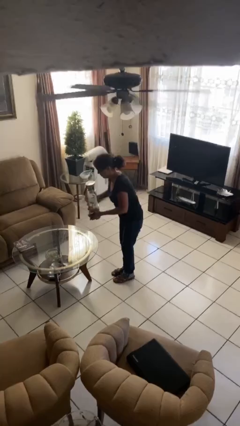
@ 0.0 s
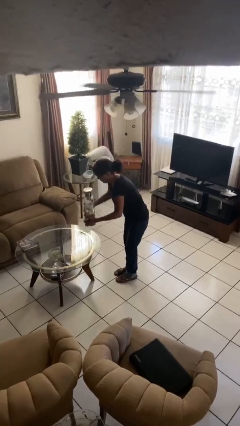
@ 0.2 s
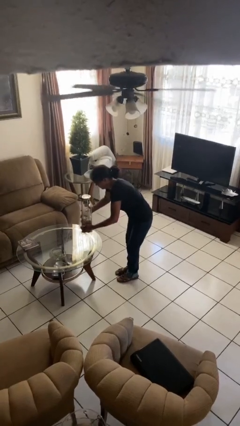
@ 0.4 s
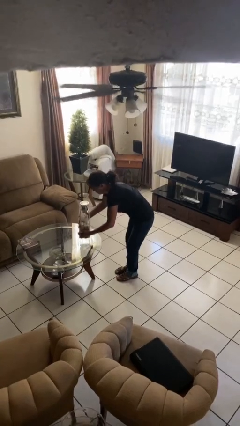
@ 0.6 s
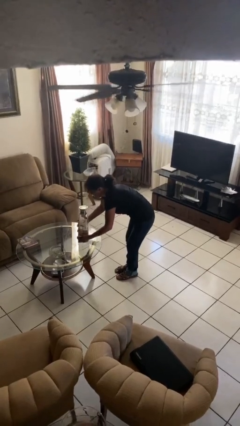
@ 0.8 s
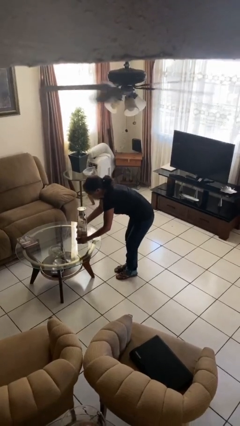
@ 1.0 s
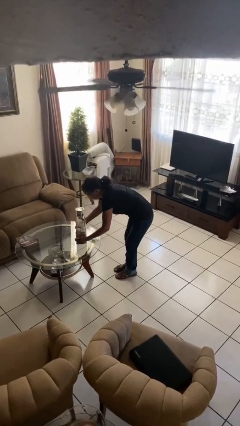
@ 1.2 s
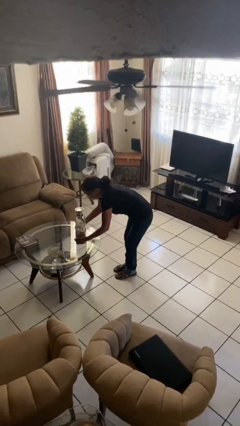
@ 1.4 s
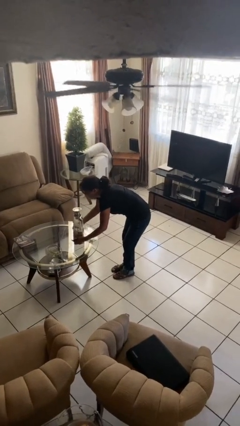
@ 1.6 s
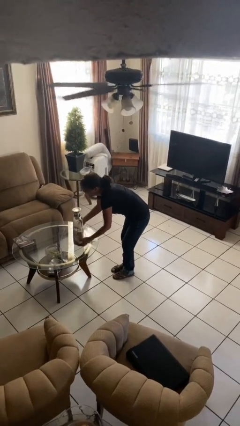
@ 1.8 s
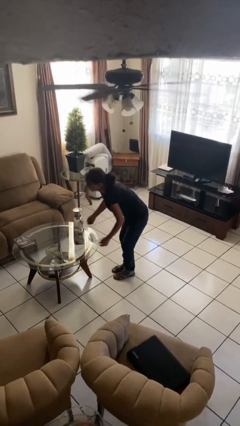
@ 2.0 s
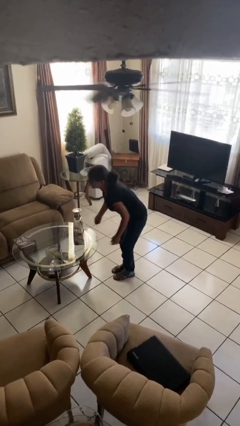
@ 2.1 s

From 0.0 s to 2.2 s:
person puts down object on table

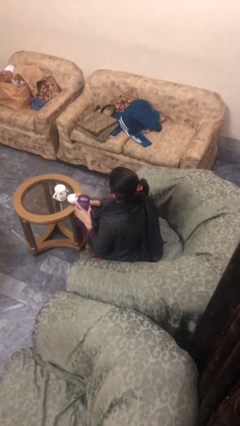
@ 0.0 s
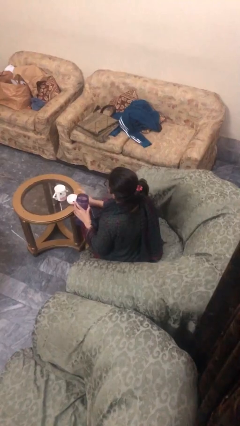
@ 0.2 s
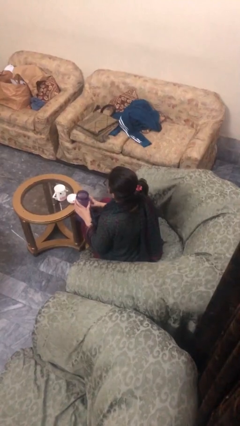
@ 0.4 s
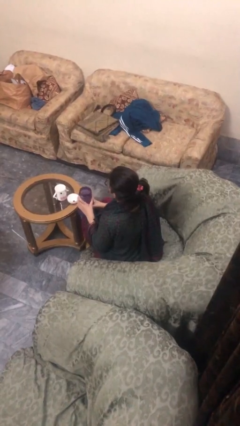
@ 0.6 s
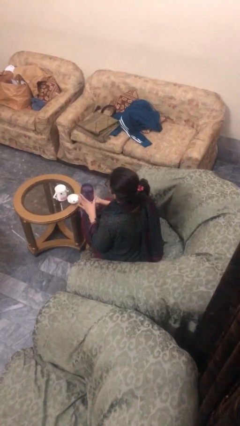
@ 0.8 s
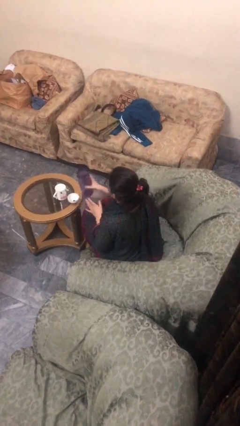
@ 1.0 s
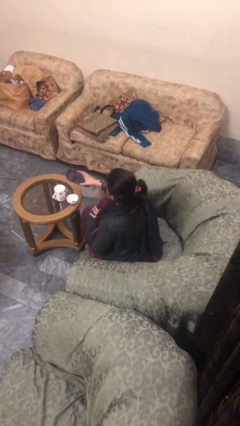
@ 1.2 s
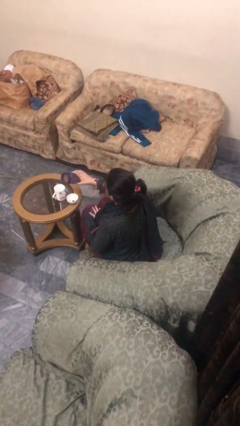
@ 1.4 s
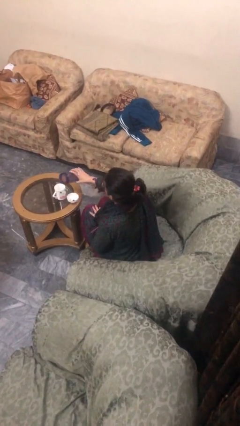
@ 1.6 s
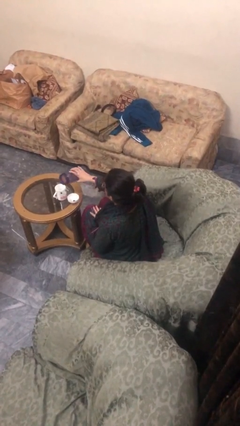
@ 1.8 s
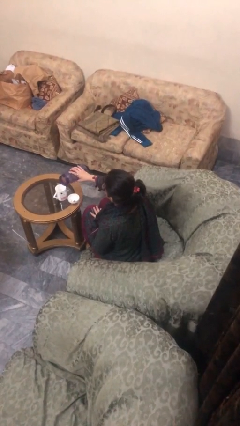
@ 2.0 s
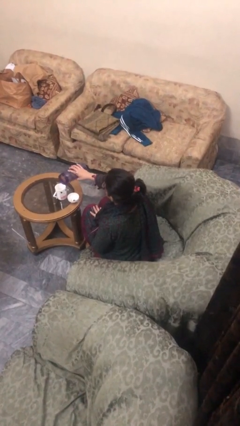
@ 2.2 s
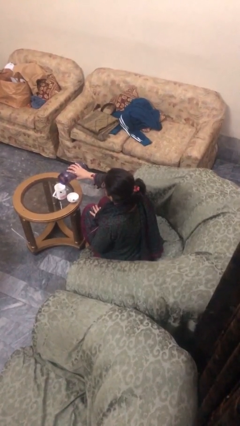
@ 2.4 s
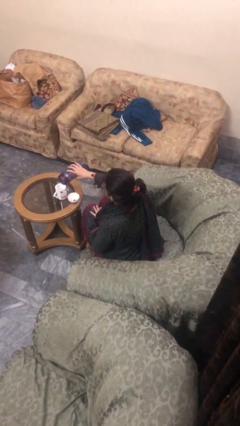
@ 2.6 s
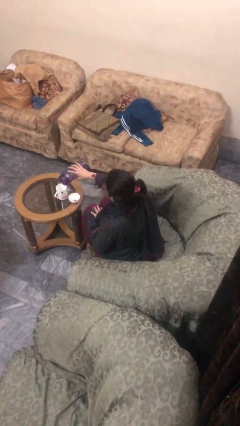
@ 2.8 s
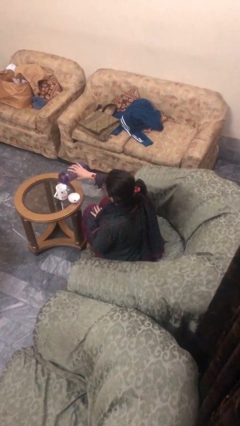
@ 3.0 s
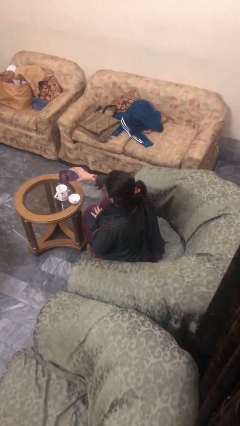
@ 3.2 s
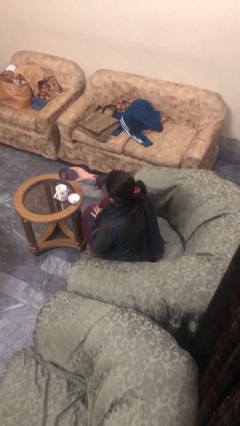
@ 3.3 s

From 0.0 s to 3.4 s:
person pours liquid into cup

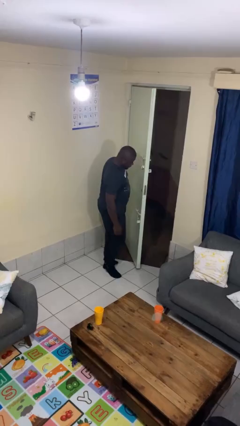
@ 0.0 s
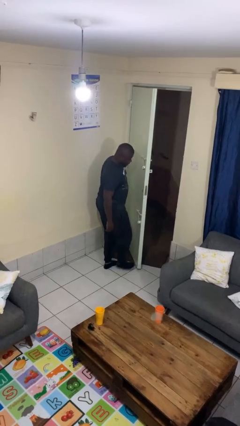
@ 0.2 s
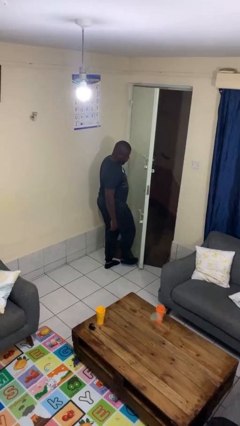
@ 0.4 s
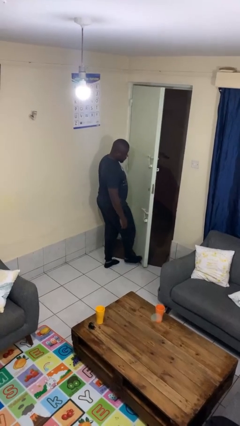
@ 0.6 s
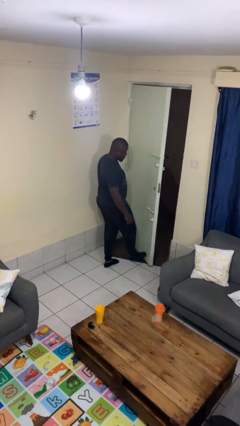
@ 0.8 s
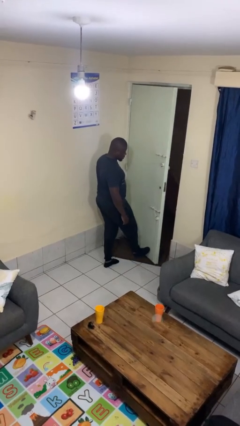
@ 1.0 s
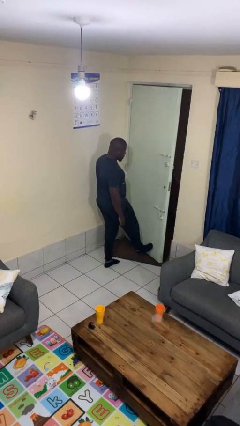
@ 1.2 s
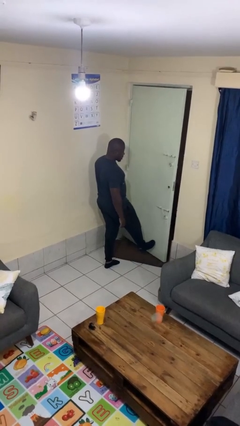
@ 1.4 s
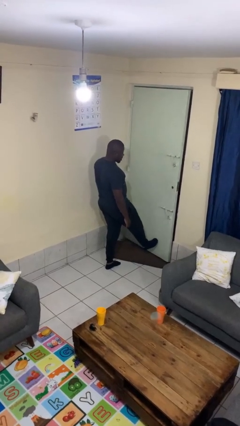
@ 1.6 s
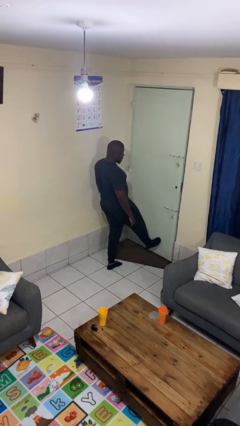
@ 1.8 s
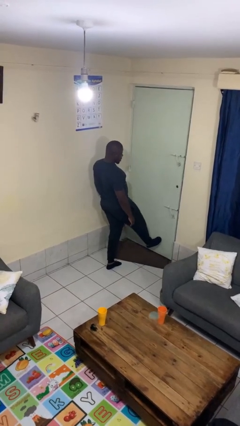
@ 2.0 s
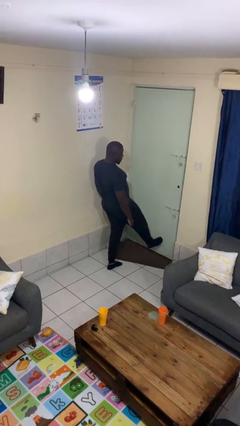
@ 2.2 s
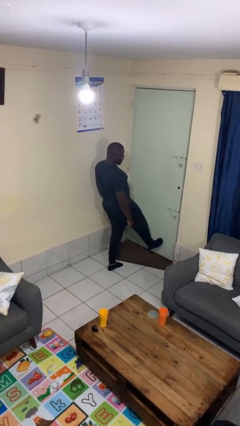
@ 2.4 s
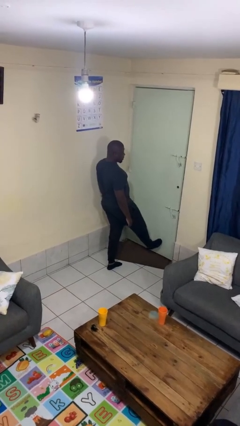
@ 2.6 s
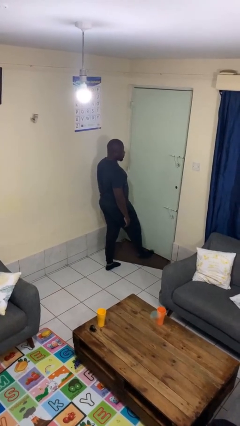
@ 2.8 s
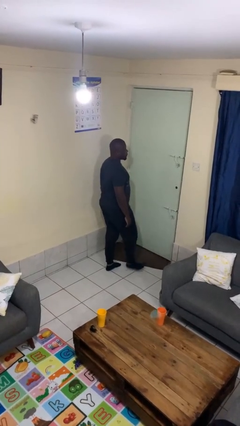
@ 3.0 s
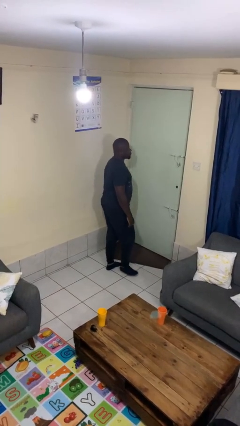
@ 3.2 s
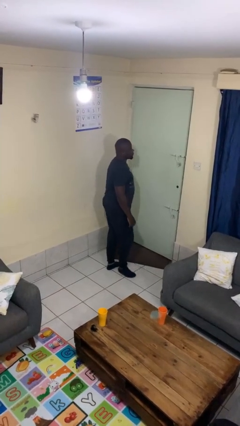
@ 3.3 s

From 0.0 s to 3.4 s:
person closes door with foot

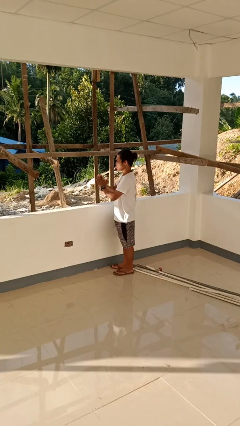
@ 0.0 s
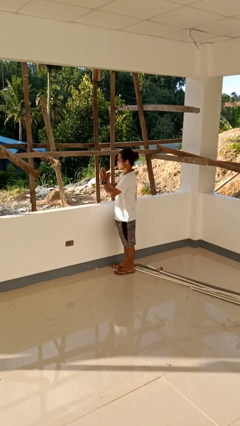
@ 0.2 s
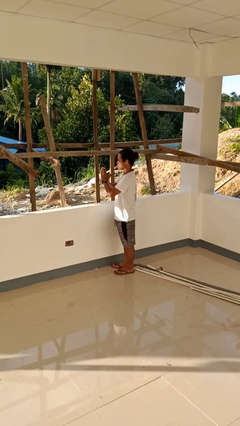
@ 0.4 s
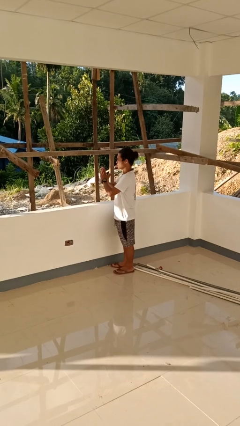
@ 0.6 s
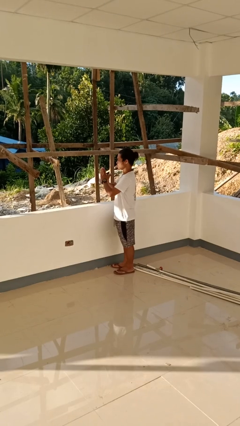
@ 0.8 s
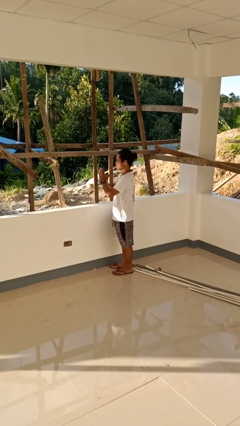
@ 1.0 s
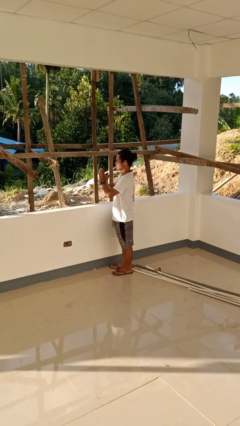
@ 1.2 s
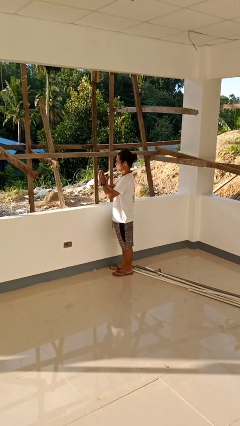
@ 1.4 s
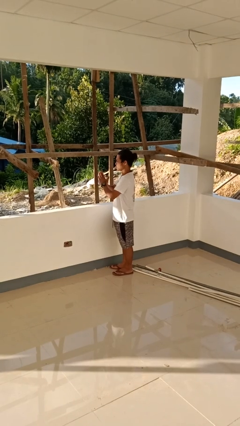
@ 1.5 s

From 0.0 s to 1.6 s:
person prays

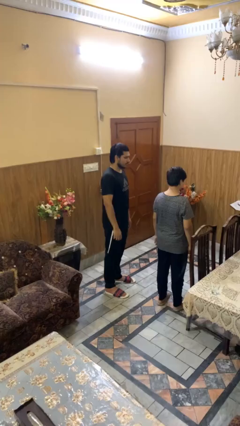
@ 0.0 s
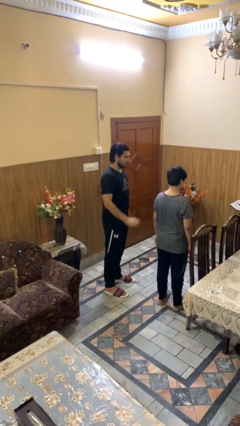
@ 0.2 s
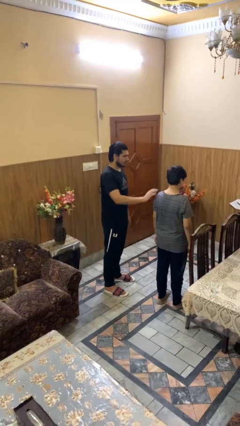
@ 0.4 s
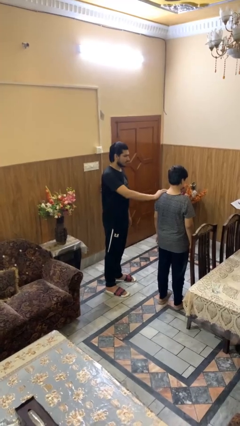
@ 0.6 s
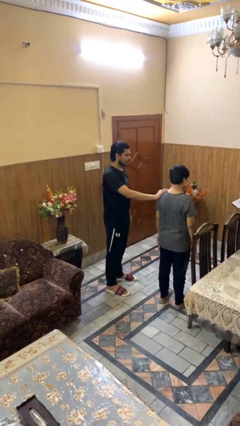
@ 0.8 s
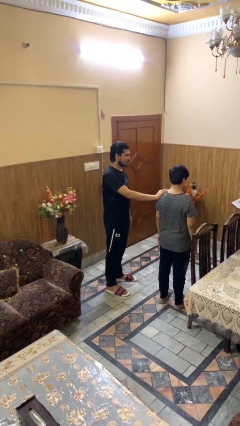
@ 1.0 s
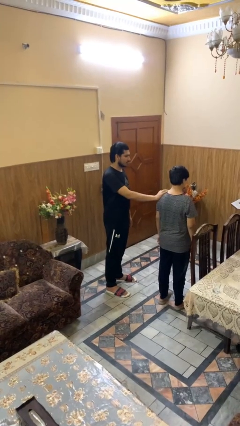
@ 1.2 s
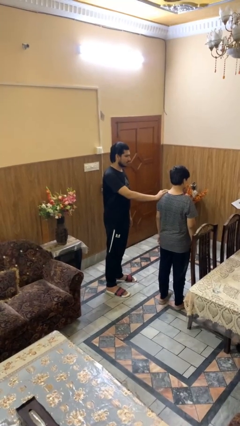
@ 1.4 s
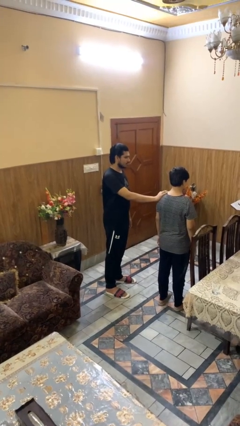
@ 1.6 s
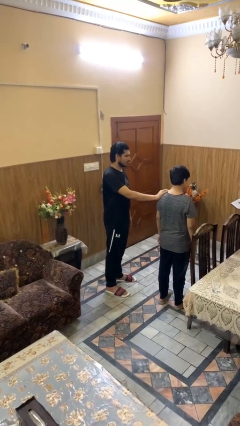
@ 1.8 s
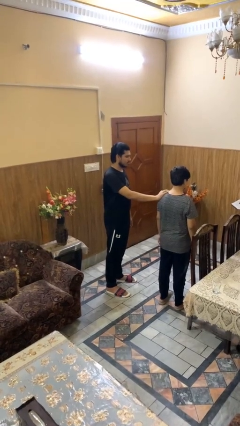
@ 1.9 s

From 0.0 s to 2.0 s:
person grabs person by shoulder

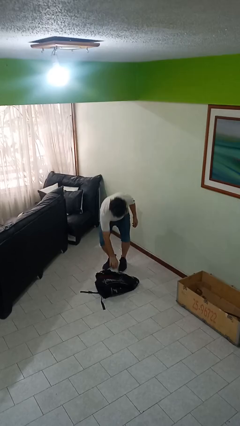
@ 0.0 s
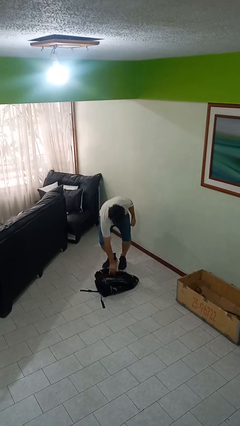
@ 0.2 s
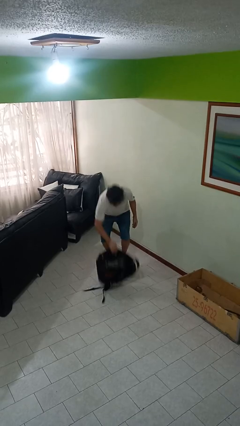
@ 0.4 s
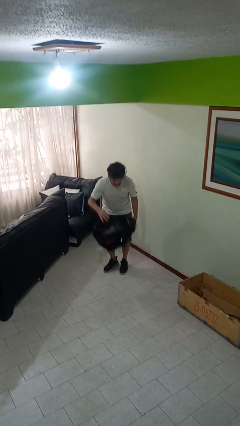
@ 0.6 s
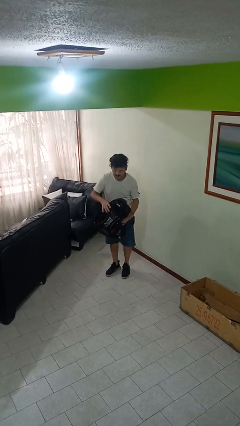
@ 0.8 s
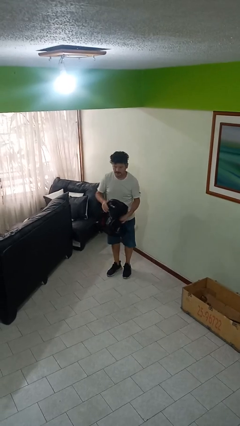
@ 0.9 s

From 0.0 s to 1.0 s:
person picks up object from floor

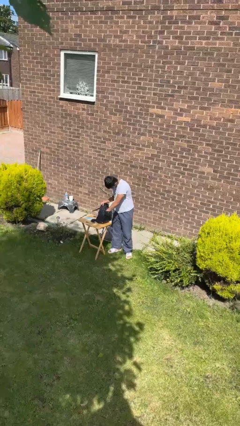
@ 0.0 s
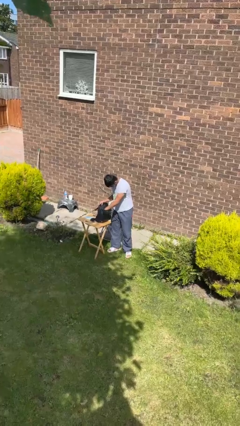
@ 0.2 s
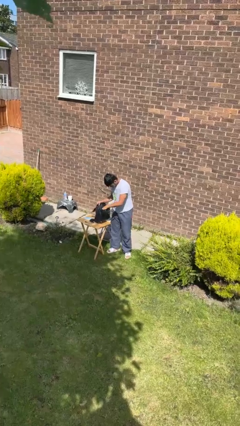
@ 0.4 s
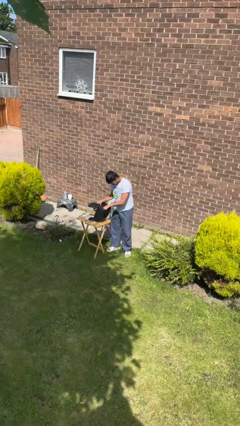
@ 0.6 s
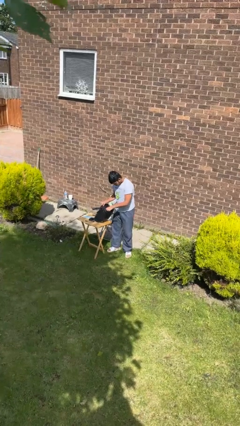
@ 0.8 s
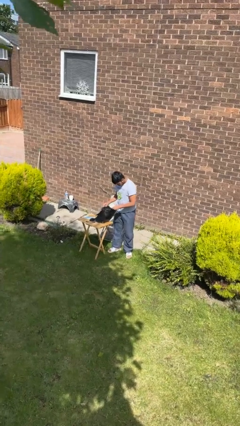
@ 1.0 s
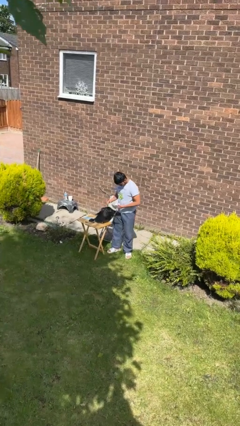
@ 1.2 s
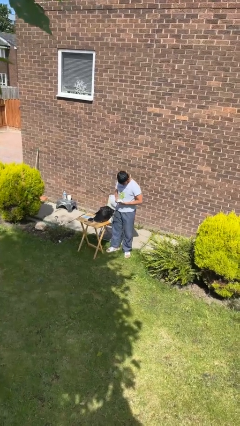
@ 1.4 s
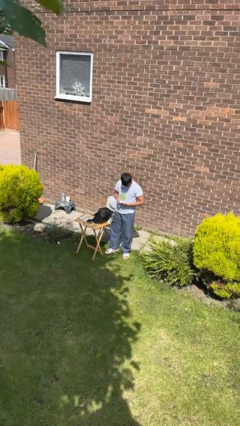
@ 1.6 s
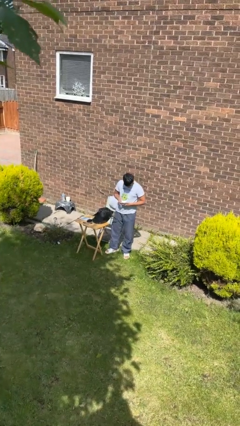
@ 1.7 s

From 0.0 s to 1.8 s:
person takes object from backpack

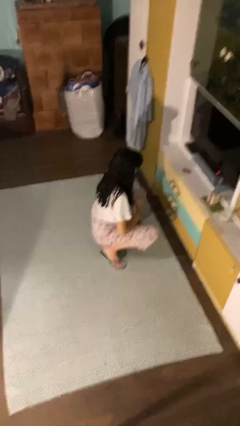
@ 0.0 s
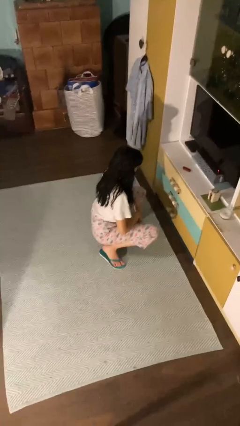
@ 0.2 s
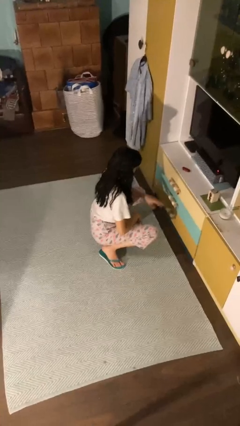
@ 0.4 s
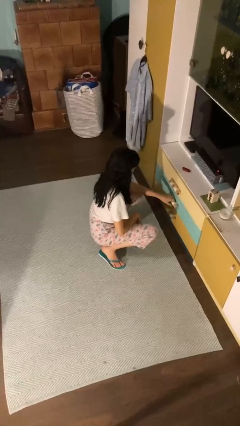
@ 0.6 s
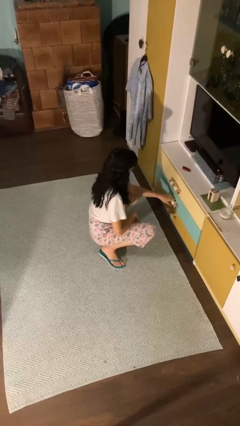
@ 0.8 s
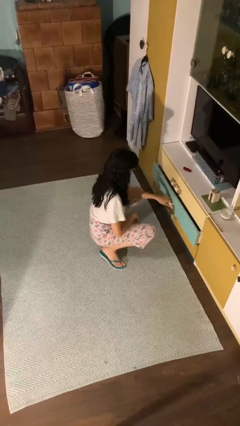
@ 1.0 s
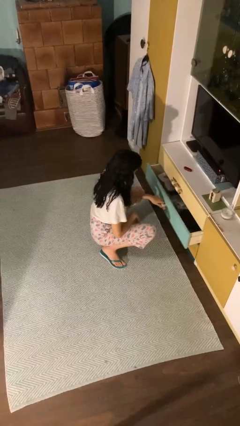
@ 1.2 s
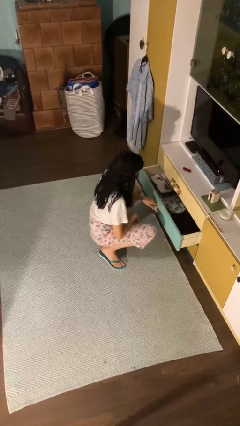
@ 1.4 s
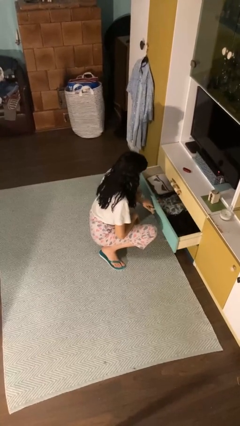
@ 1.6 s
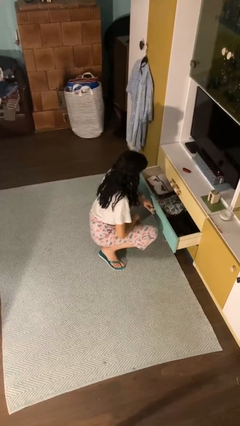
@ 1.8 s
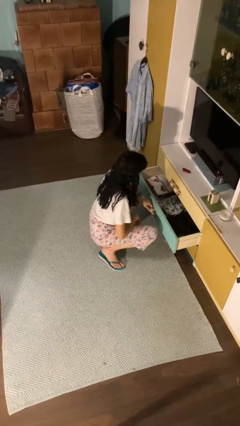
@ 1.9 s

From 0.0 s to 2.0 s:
person opens dresser drawer
